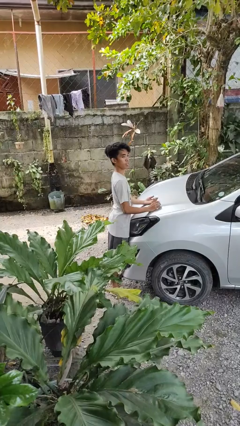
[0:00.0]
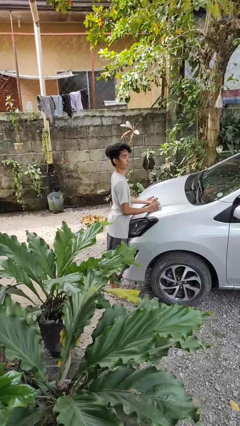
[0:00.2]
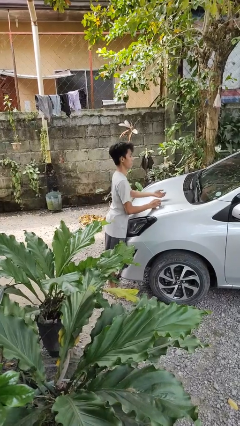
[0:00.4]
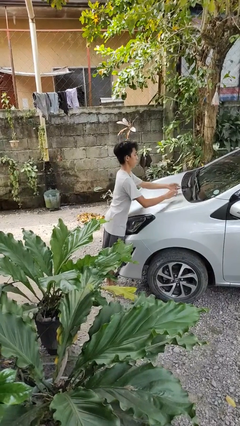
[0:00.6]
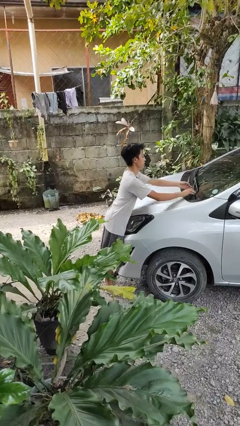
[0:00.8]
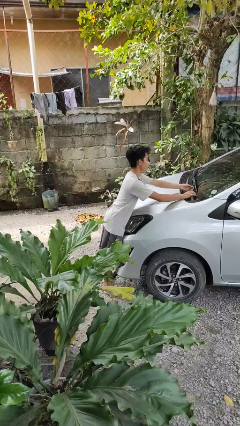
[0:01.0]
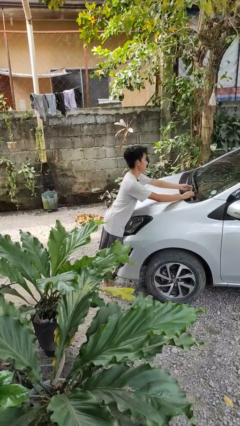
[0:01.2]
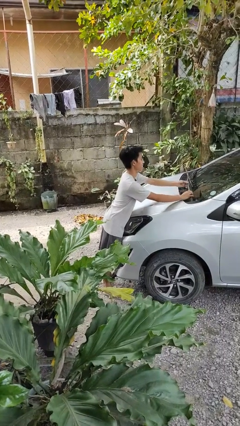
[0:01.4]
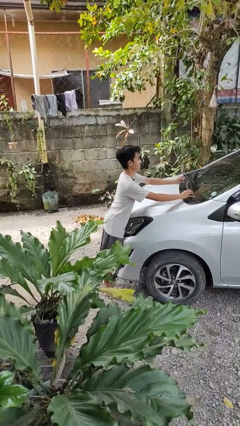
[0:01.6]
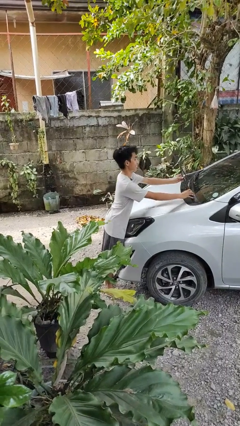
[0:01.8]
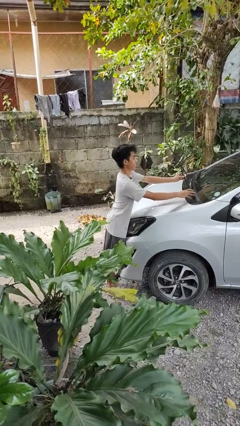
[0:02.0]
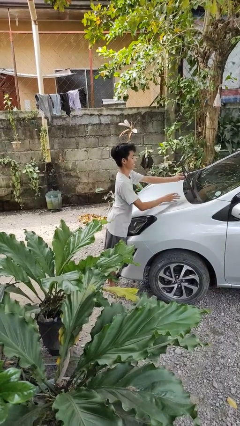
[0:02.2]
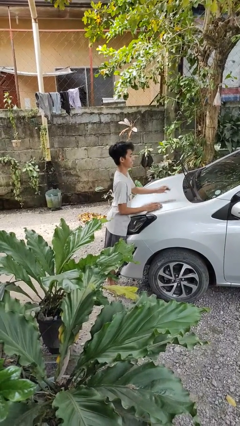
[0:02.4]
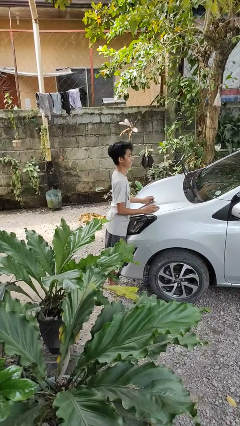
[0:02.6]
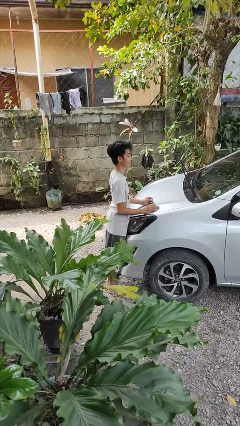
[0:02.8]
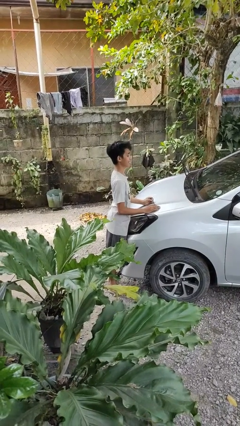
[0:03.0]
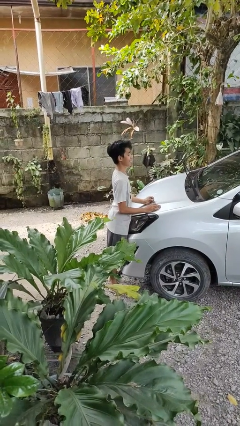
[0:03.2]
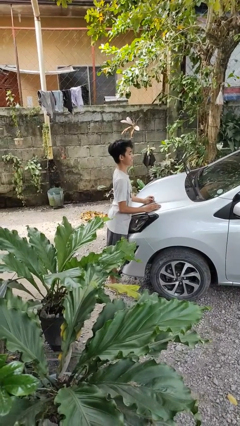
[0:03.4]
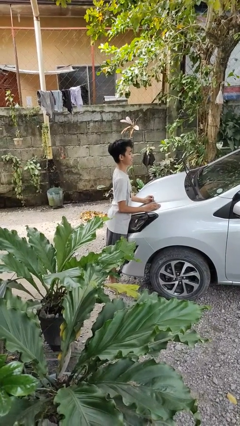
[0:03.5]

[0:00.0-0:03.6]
person flips up car wipers

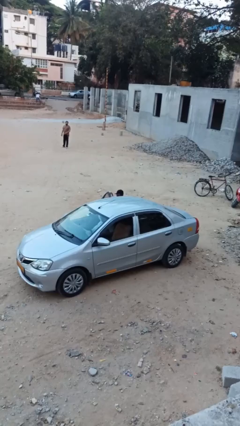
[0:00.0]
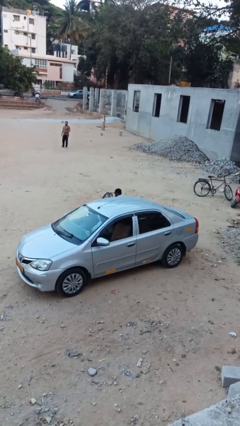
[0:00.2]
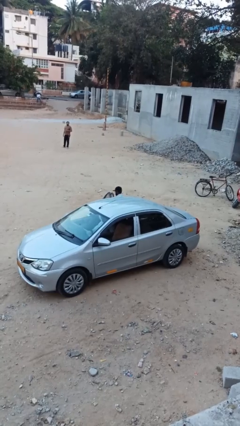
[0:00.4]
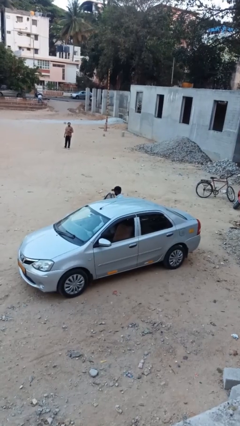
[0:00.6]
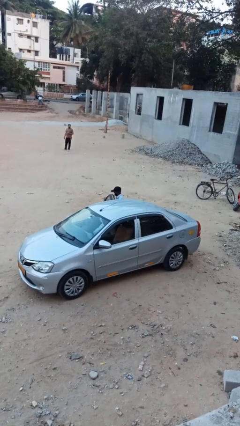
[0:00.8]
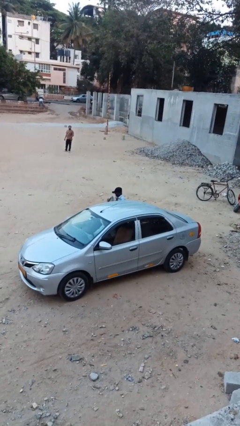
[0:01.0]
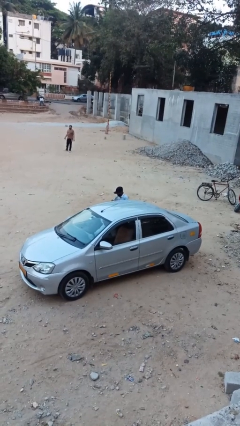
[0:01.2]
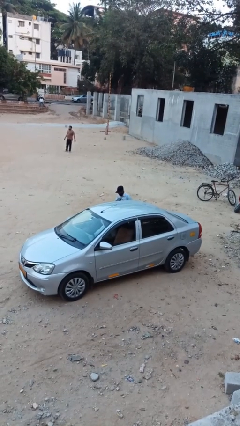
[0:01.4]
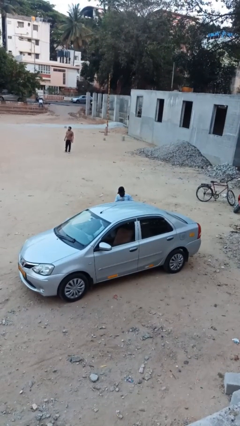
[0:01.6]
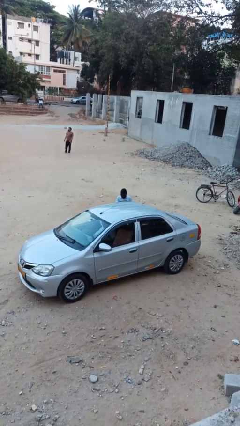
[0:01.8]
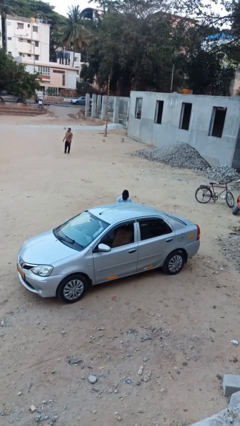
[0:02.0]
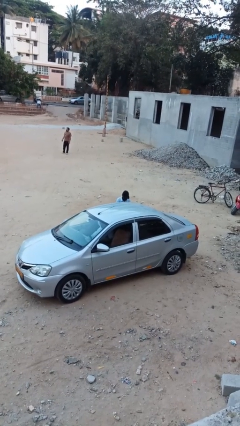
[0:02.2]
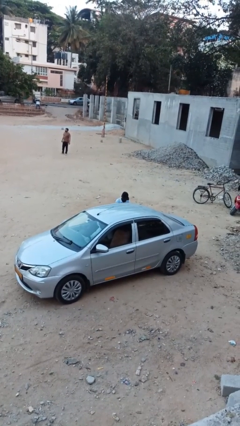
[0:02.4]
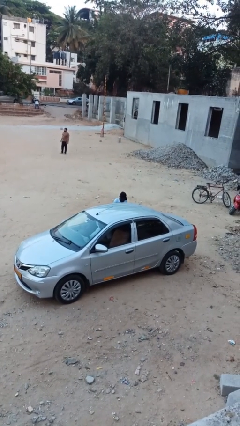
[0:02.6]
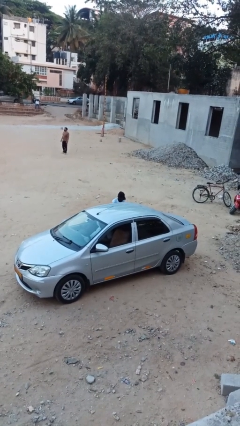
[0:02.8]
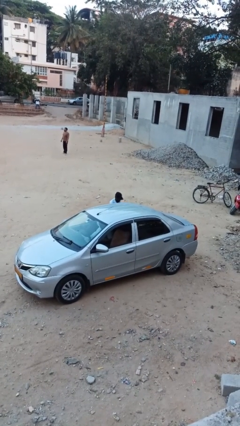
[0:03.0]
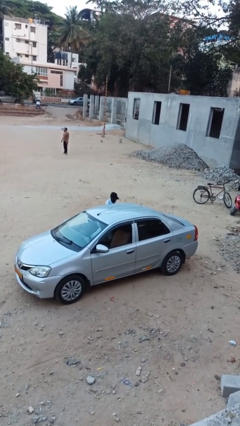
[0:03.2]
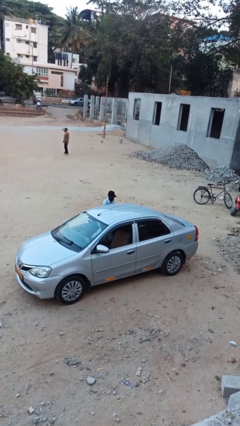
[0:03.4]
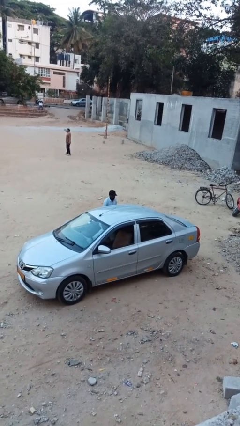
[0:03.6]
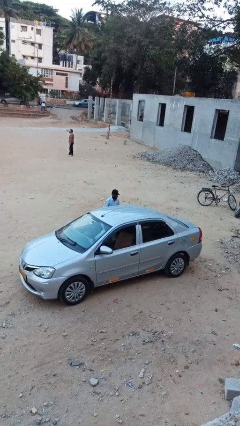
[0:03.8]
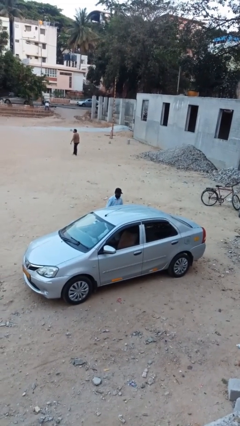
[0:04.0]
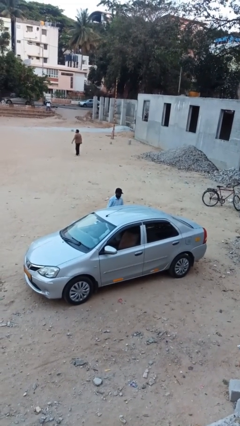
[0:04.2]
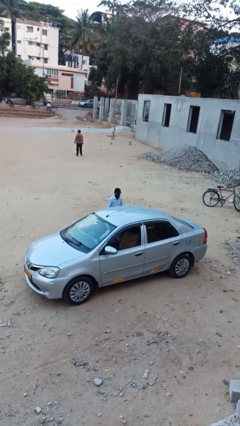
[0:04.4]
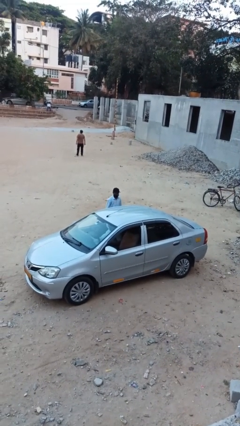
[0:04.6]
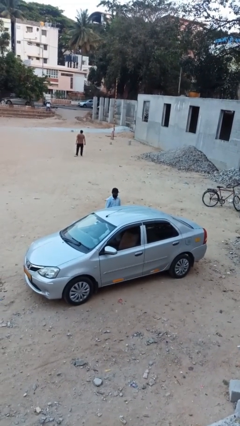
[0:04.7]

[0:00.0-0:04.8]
person exits car

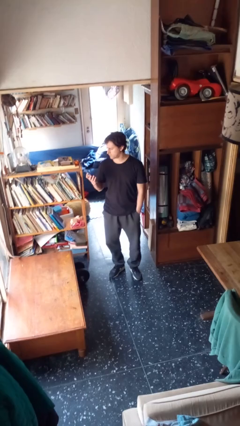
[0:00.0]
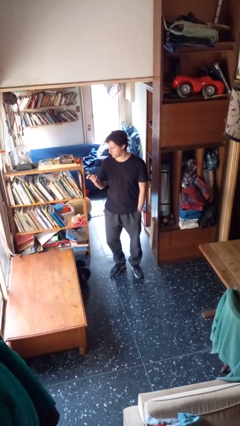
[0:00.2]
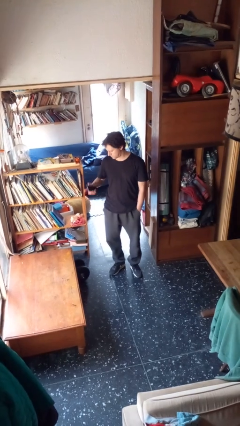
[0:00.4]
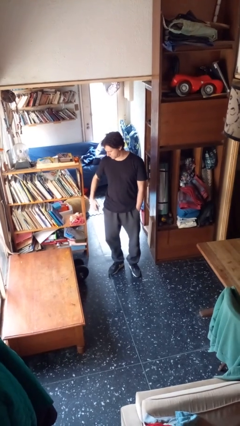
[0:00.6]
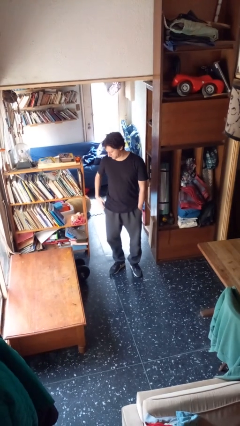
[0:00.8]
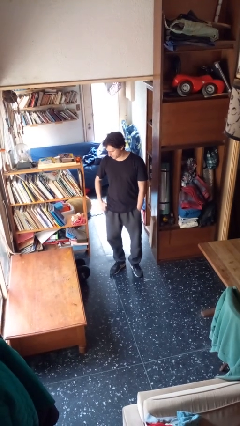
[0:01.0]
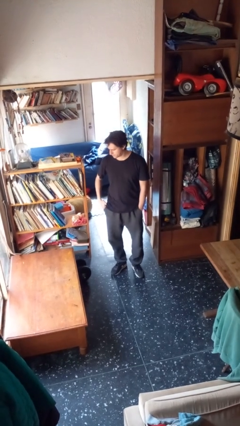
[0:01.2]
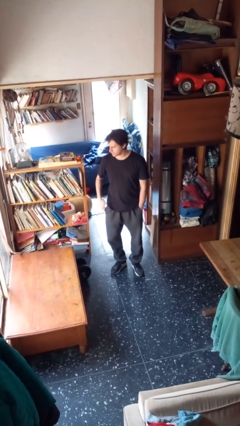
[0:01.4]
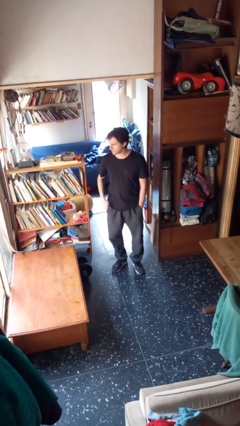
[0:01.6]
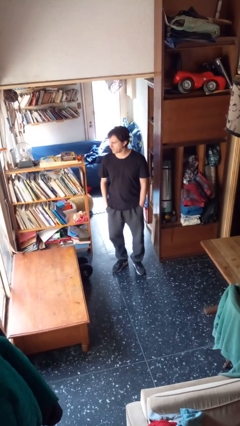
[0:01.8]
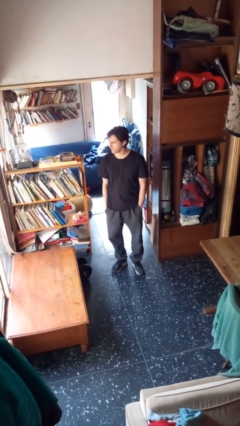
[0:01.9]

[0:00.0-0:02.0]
person puts phone into pocket

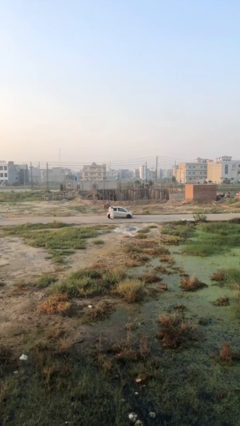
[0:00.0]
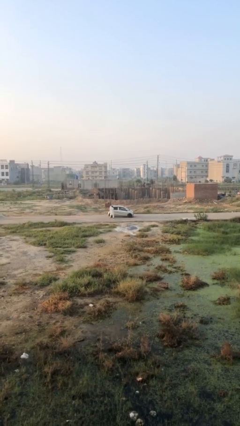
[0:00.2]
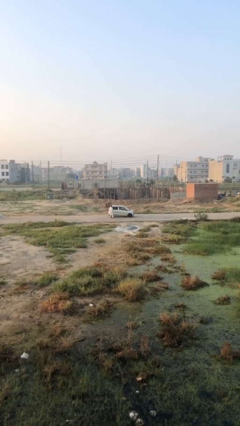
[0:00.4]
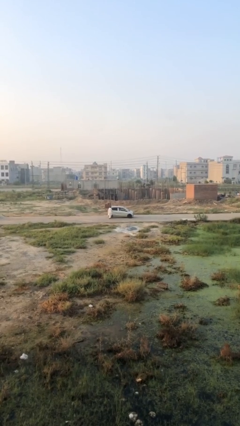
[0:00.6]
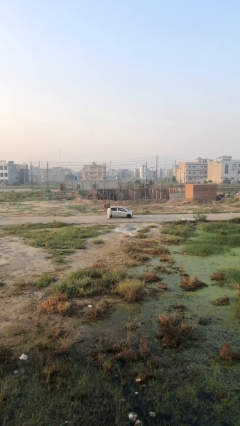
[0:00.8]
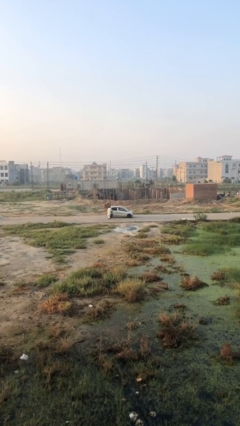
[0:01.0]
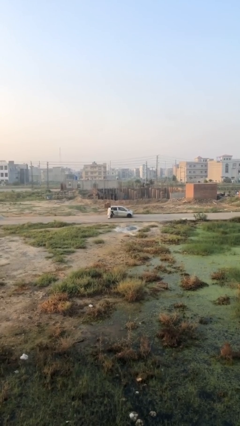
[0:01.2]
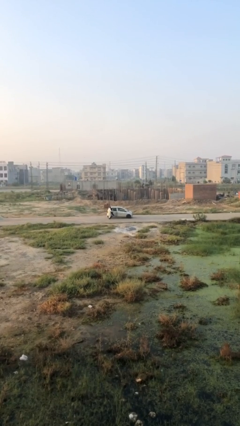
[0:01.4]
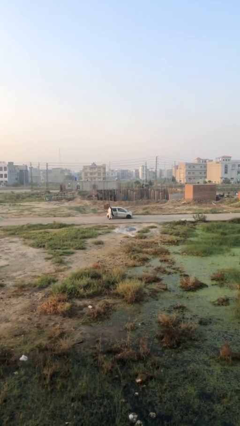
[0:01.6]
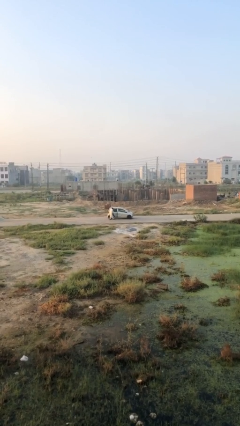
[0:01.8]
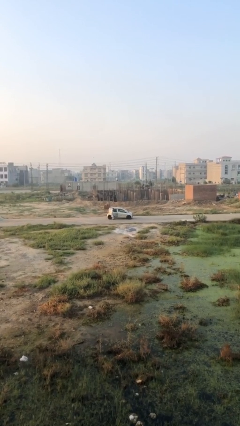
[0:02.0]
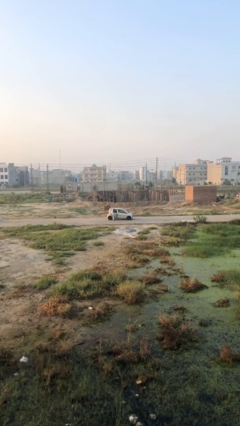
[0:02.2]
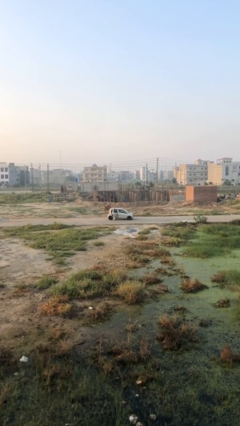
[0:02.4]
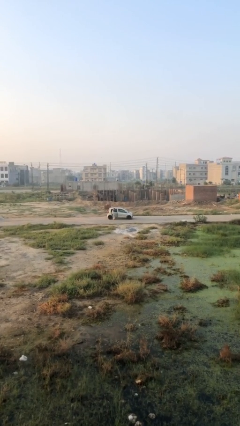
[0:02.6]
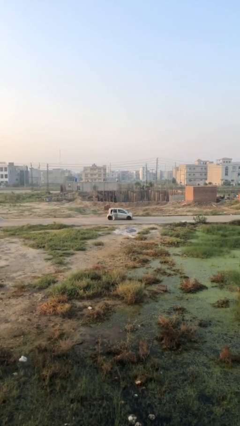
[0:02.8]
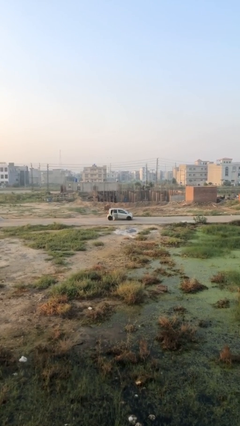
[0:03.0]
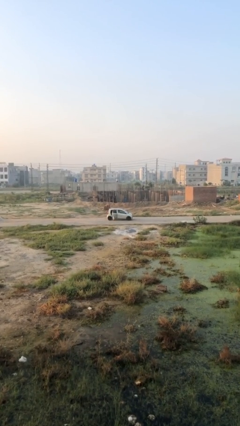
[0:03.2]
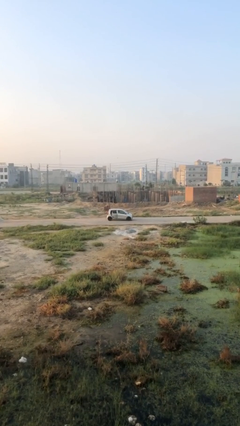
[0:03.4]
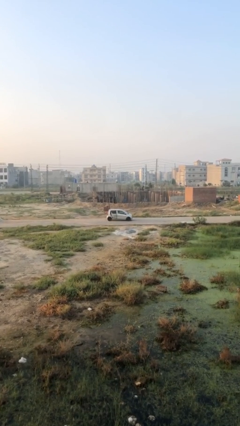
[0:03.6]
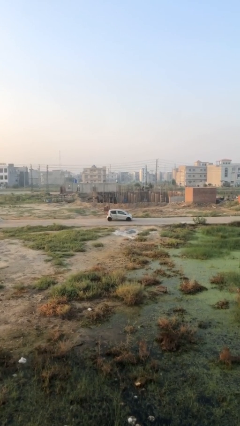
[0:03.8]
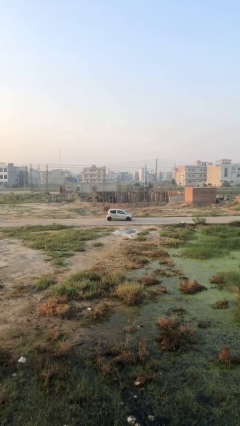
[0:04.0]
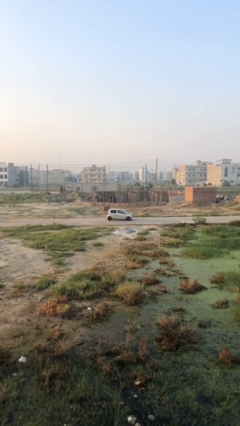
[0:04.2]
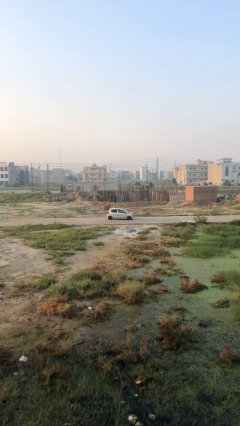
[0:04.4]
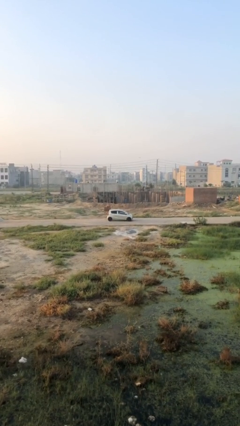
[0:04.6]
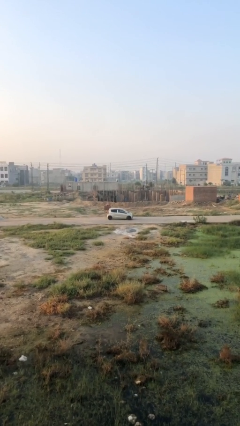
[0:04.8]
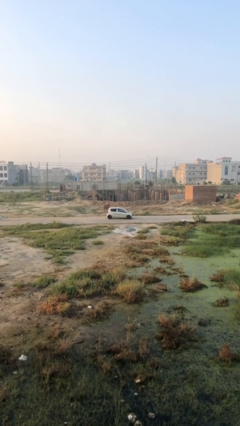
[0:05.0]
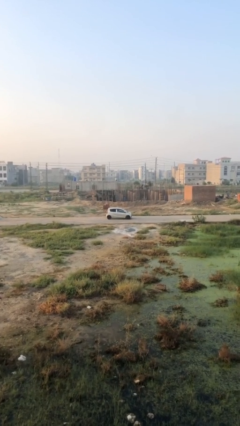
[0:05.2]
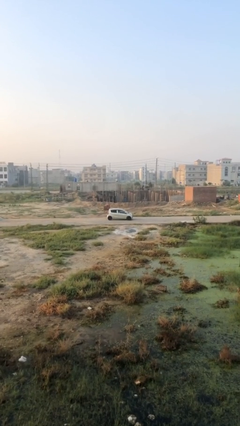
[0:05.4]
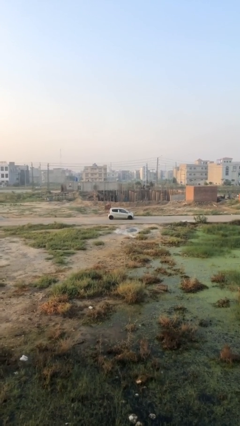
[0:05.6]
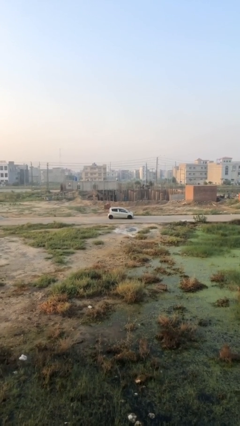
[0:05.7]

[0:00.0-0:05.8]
car picks up person

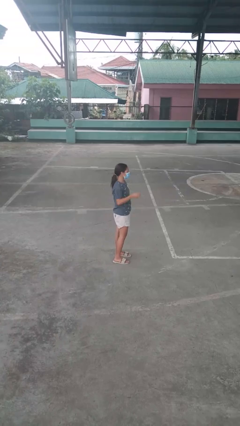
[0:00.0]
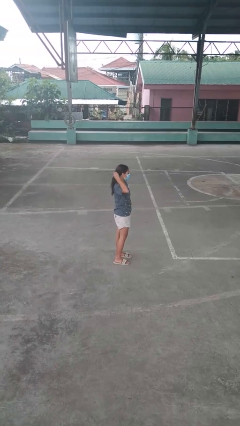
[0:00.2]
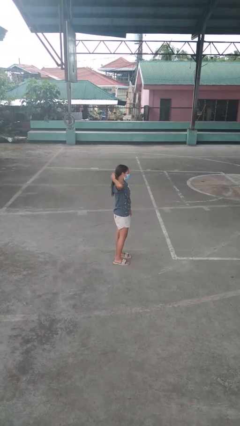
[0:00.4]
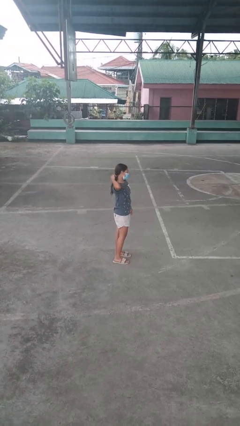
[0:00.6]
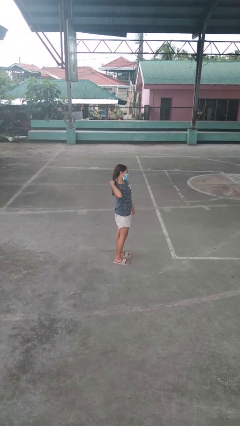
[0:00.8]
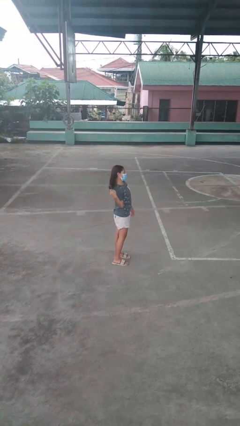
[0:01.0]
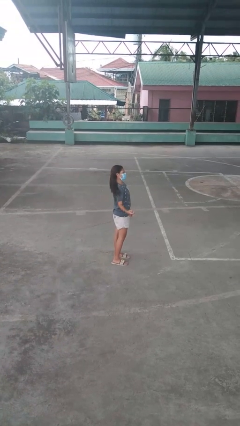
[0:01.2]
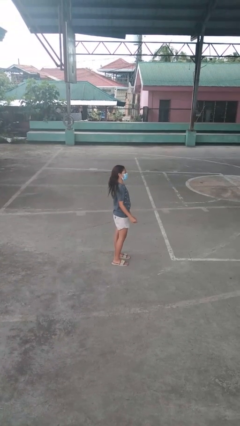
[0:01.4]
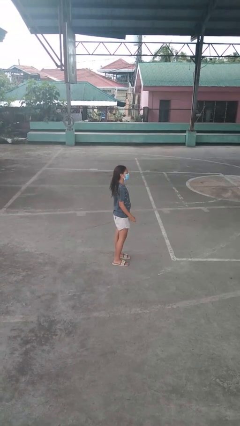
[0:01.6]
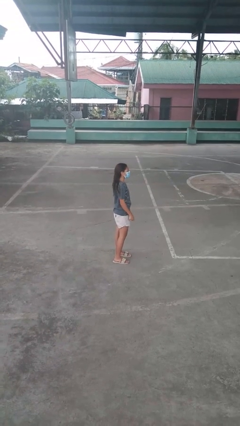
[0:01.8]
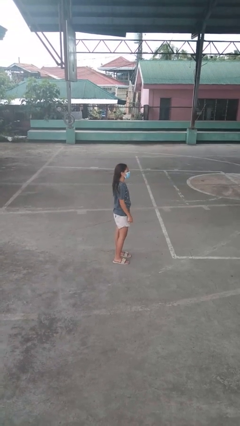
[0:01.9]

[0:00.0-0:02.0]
person takes off hairtie
